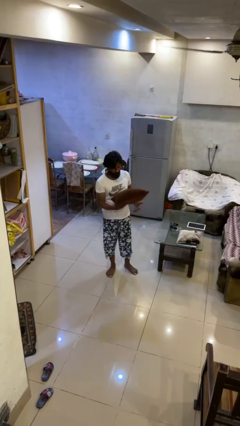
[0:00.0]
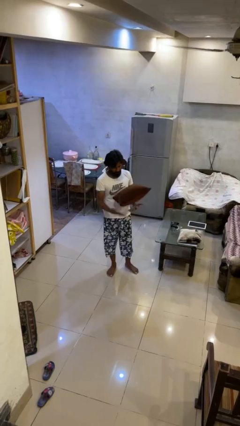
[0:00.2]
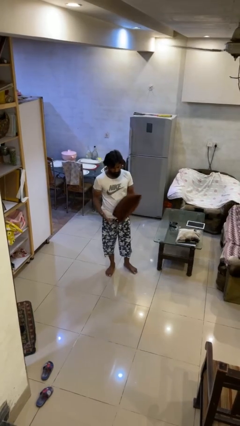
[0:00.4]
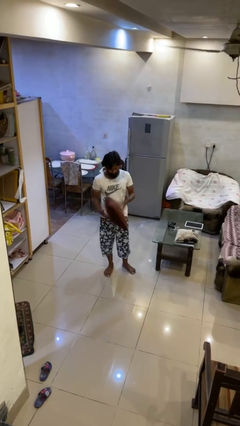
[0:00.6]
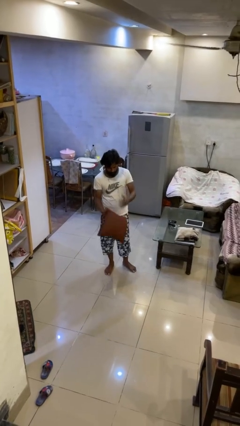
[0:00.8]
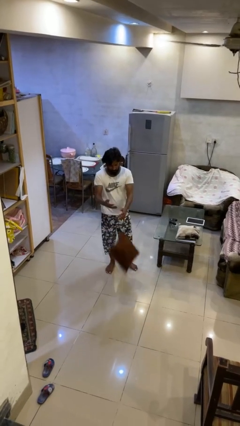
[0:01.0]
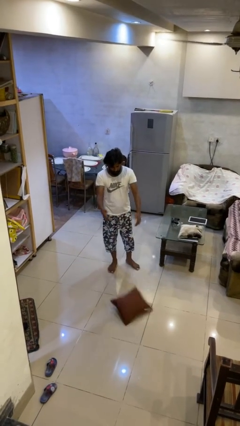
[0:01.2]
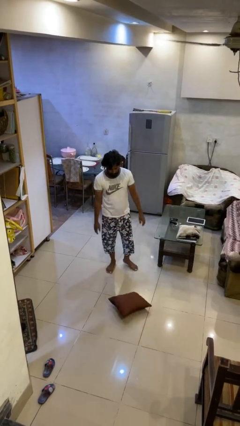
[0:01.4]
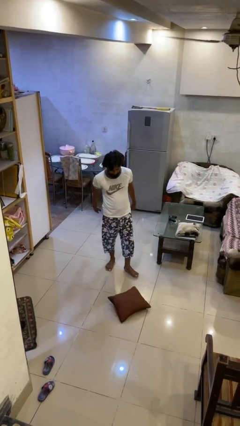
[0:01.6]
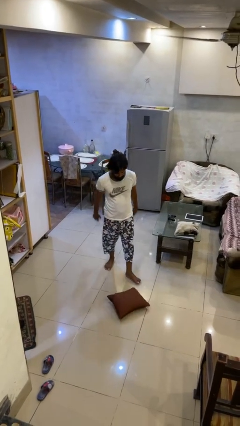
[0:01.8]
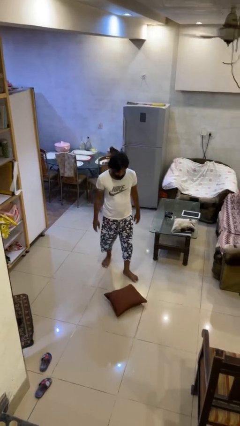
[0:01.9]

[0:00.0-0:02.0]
person drops object

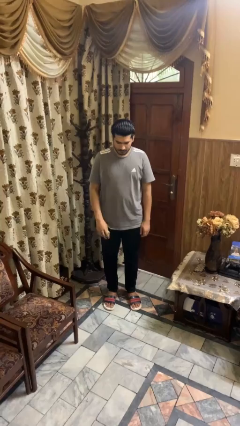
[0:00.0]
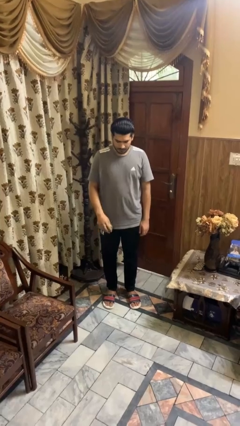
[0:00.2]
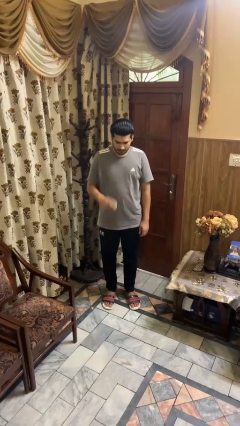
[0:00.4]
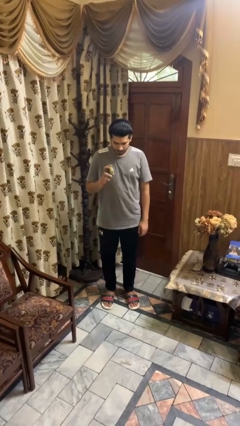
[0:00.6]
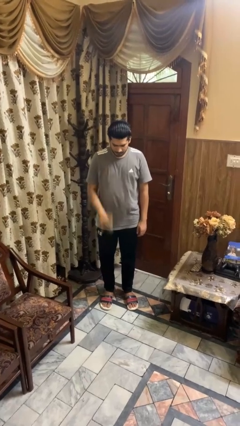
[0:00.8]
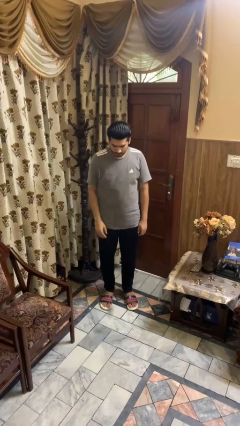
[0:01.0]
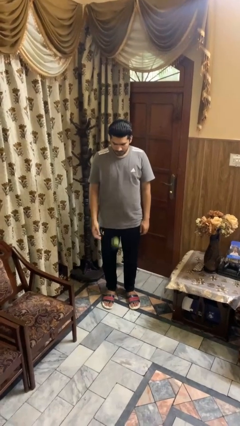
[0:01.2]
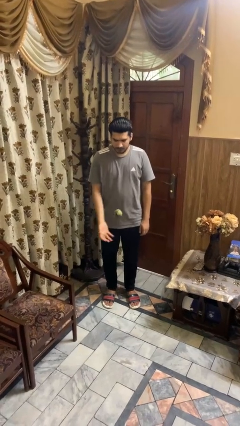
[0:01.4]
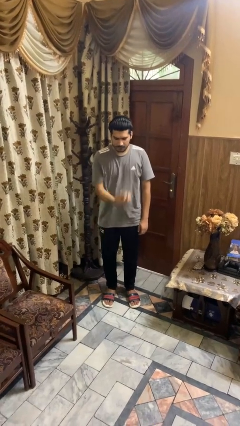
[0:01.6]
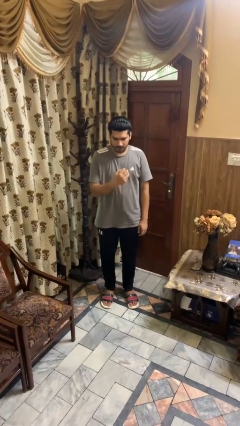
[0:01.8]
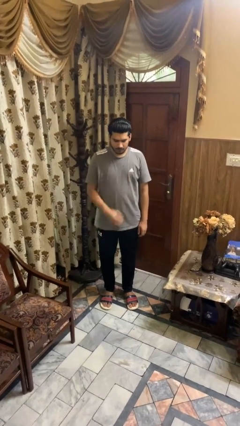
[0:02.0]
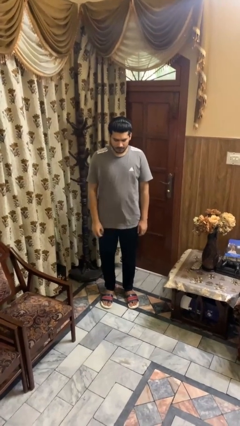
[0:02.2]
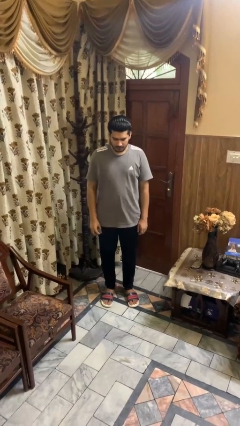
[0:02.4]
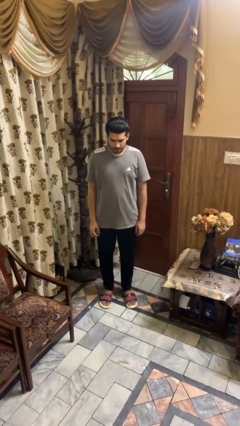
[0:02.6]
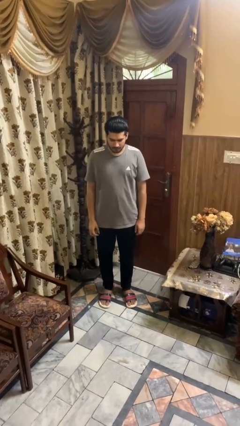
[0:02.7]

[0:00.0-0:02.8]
person bounces ball on floor

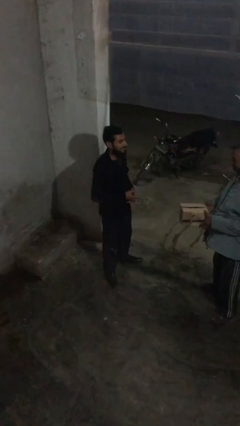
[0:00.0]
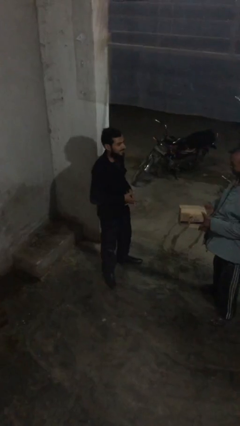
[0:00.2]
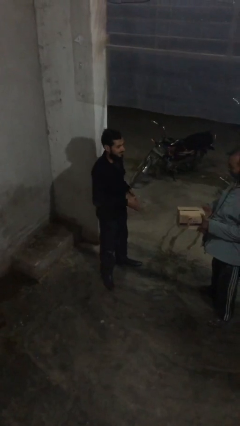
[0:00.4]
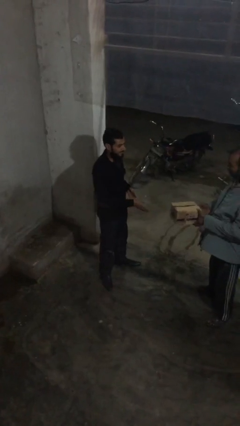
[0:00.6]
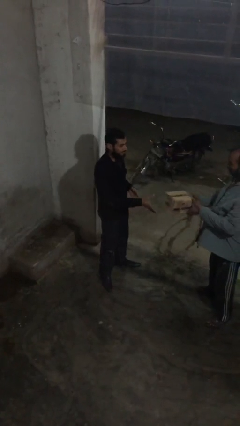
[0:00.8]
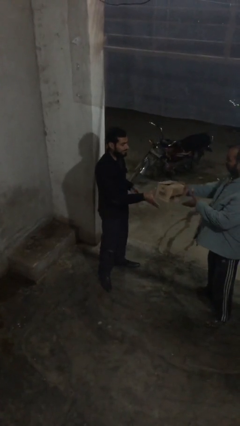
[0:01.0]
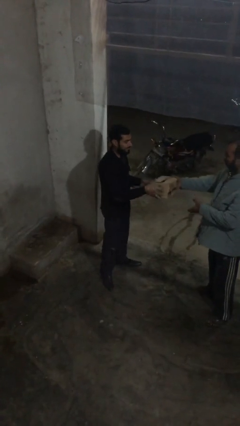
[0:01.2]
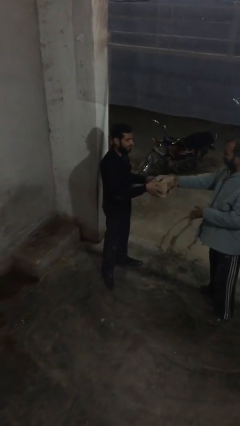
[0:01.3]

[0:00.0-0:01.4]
person transfers object to person

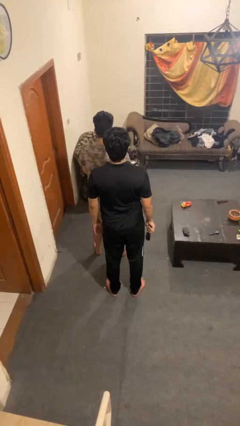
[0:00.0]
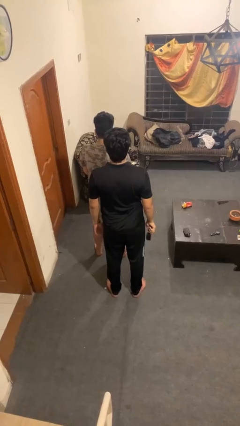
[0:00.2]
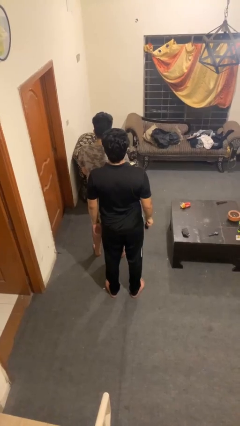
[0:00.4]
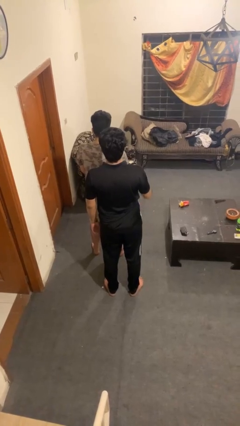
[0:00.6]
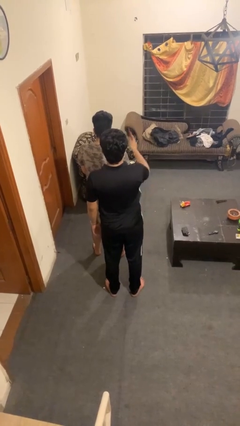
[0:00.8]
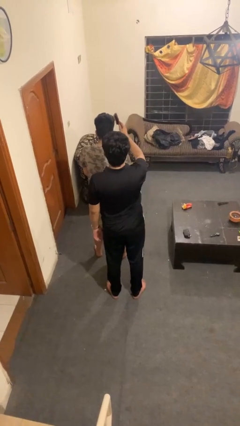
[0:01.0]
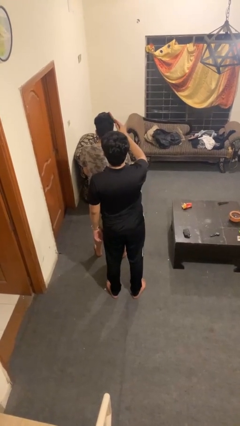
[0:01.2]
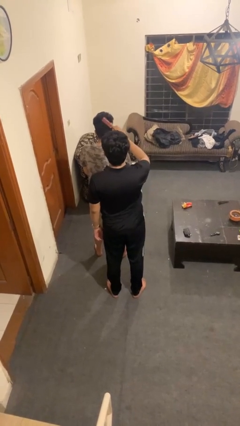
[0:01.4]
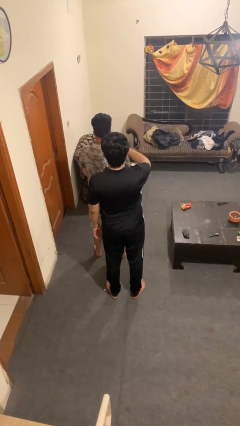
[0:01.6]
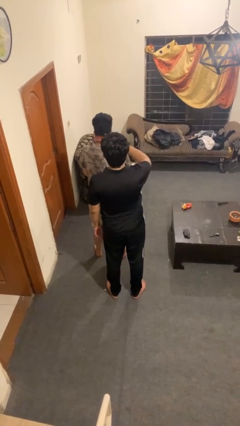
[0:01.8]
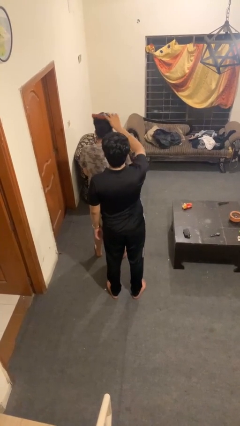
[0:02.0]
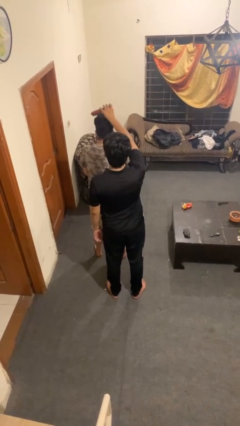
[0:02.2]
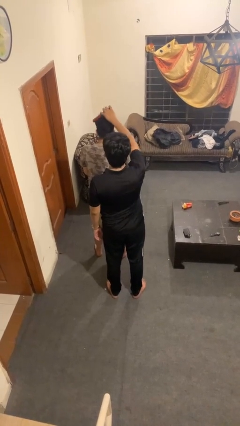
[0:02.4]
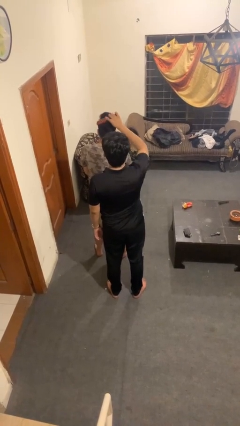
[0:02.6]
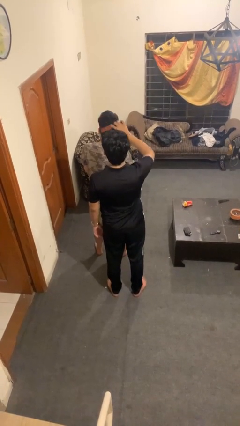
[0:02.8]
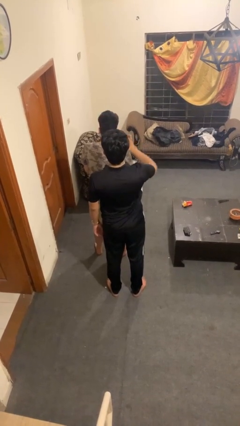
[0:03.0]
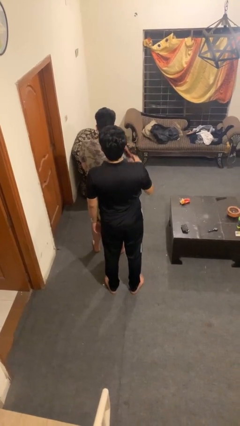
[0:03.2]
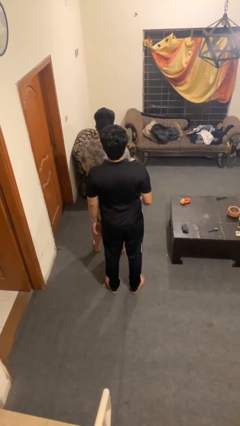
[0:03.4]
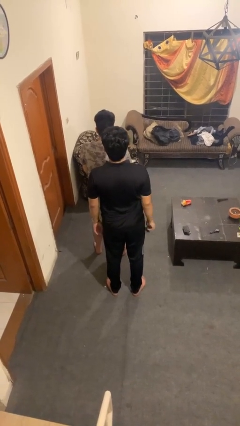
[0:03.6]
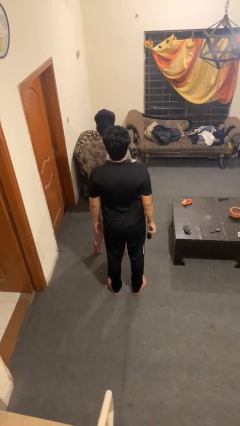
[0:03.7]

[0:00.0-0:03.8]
person brushes hair of person

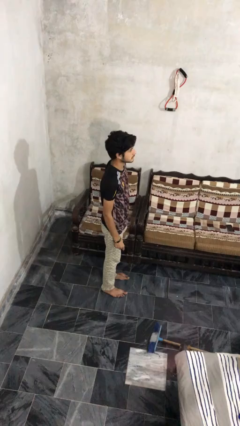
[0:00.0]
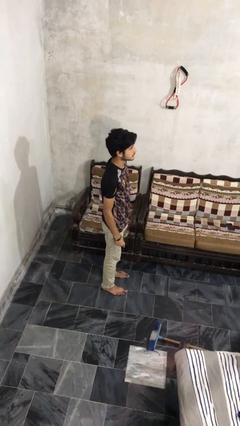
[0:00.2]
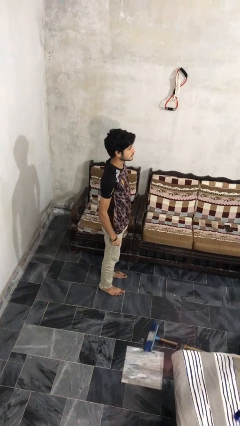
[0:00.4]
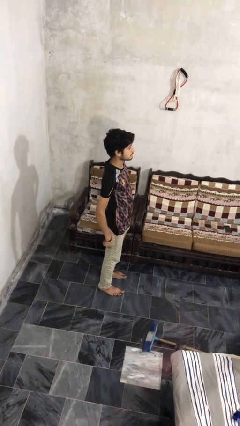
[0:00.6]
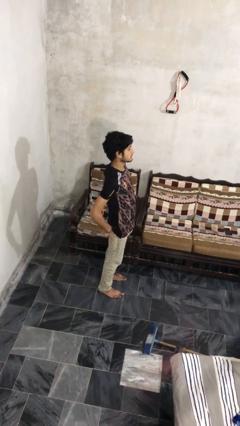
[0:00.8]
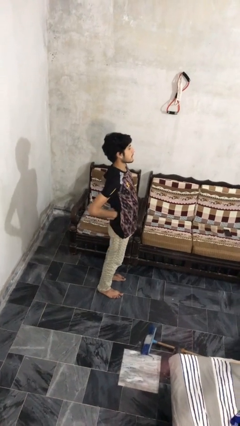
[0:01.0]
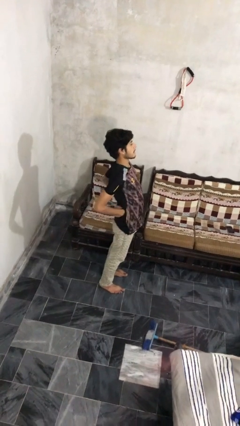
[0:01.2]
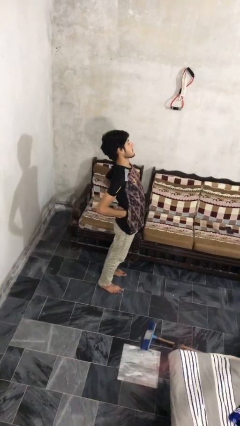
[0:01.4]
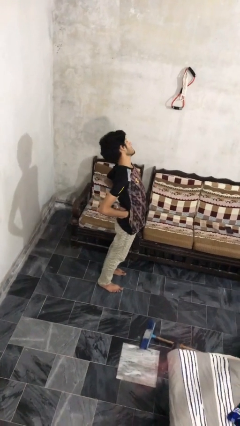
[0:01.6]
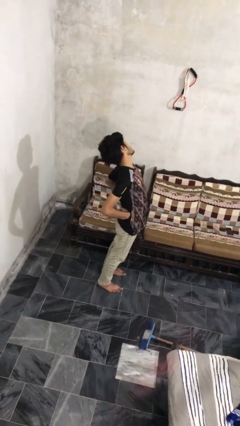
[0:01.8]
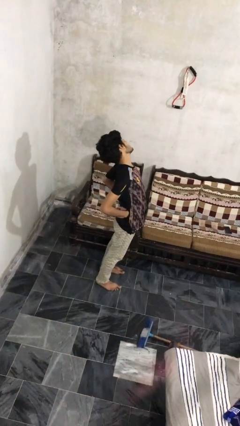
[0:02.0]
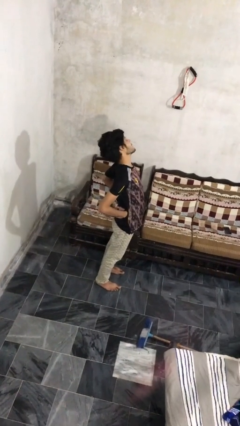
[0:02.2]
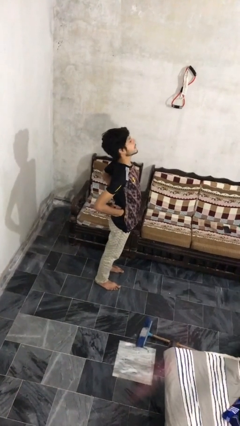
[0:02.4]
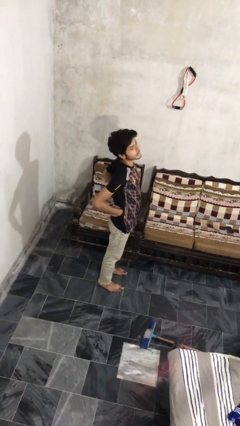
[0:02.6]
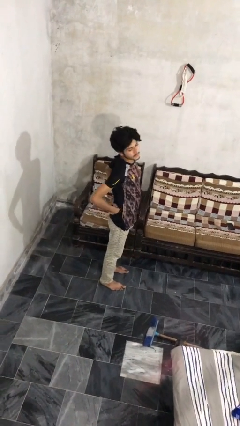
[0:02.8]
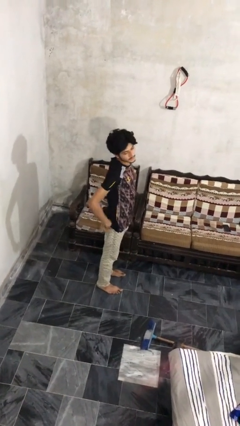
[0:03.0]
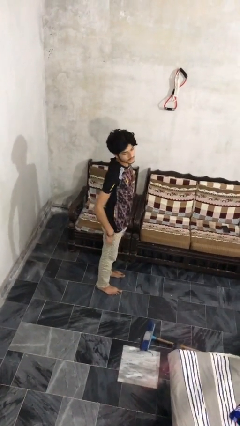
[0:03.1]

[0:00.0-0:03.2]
person stretches back

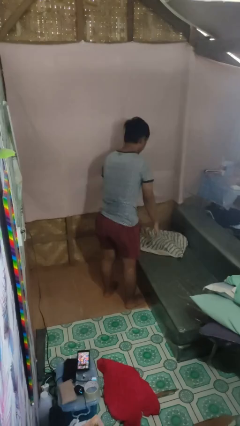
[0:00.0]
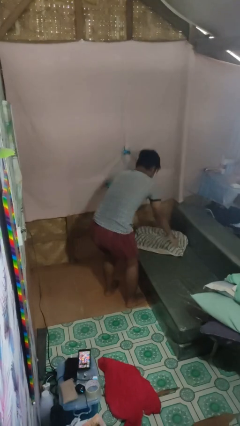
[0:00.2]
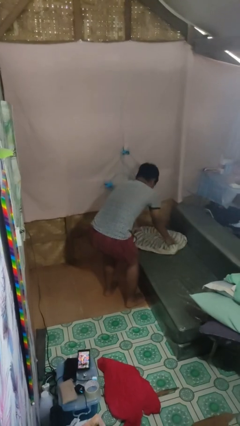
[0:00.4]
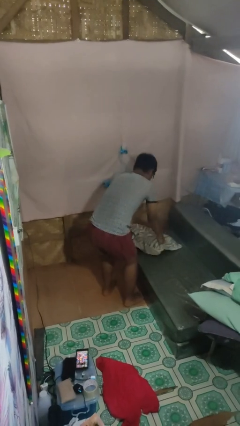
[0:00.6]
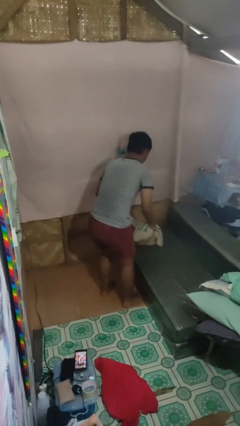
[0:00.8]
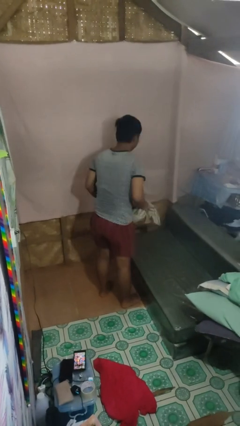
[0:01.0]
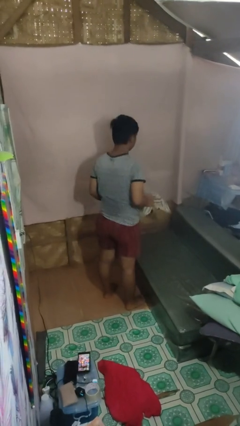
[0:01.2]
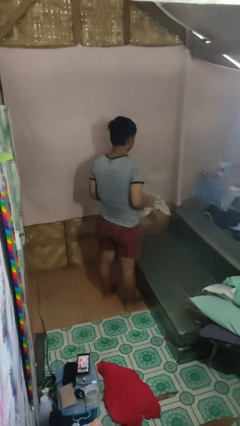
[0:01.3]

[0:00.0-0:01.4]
person picks up object from couch

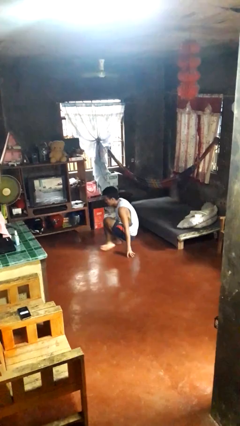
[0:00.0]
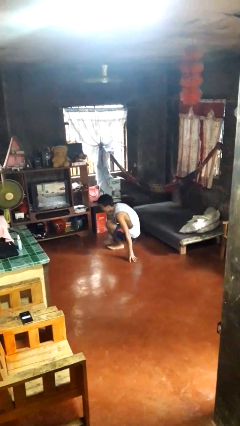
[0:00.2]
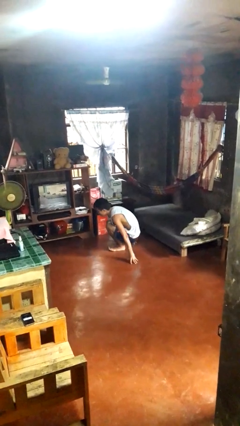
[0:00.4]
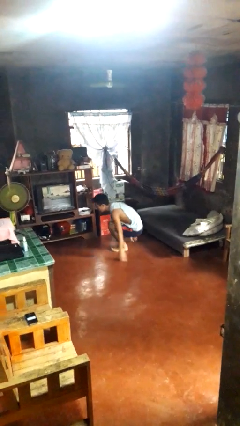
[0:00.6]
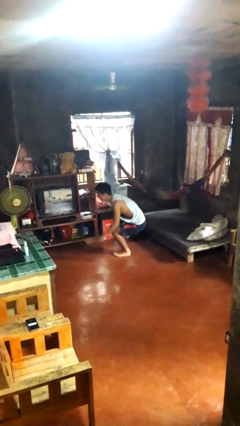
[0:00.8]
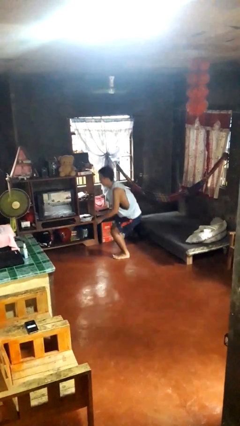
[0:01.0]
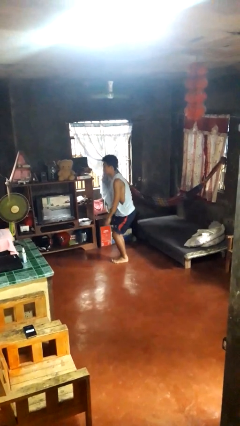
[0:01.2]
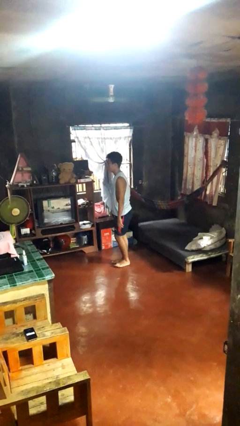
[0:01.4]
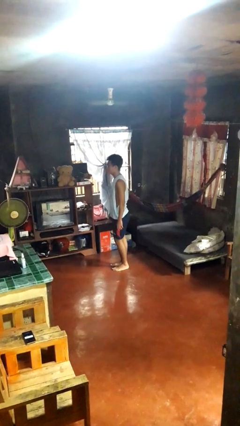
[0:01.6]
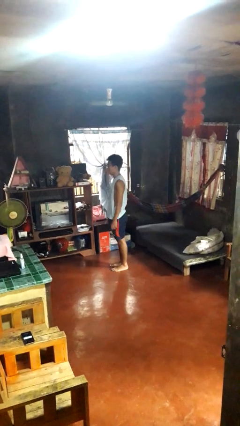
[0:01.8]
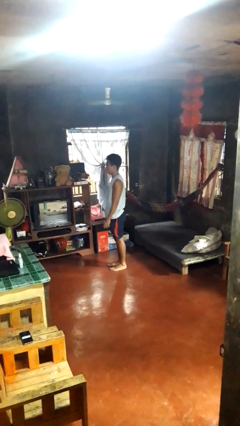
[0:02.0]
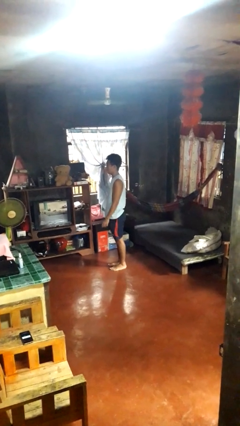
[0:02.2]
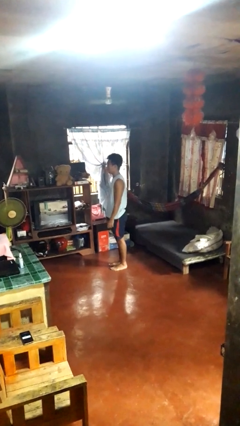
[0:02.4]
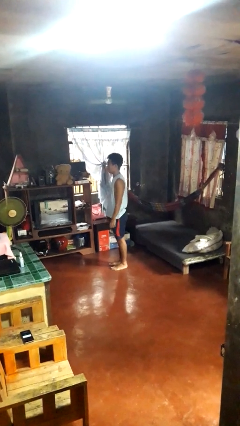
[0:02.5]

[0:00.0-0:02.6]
person stands up from floor
